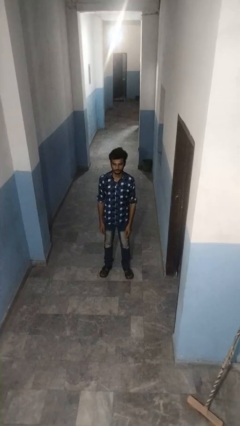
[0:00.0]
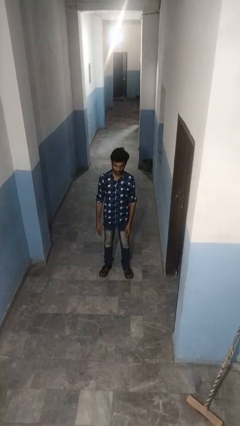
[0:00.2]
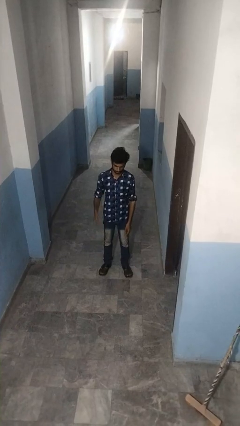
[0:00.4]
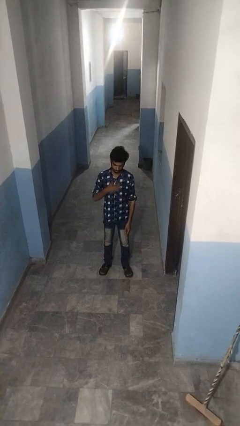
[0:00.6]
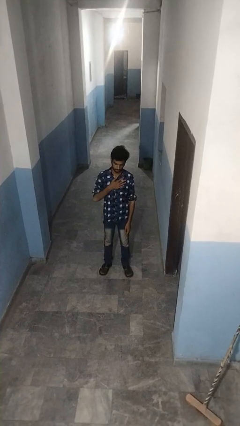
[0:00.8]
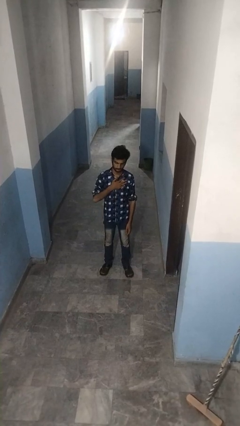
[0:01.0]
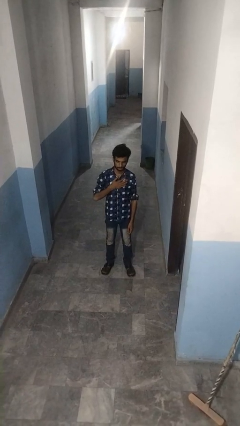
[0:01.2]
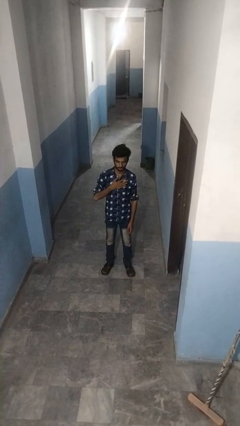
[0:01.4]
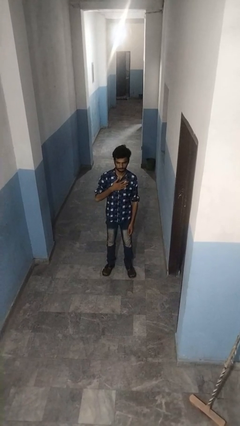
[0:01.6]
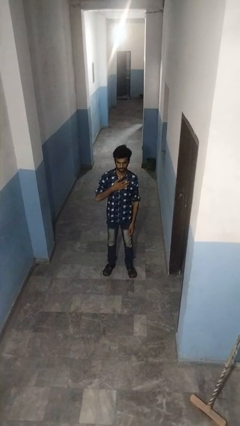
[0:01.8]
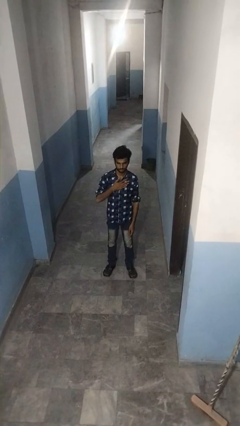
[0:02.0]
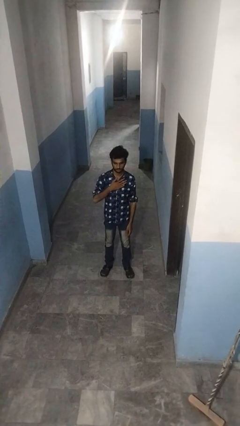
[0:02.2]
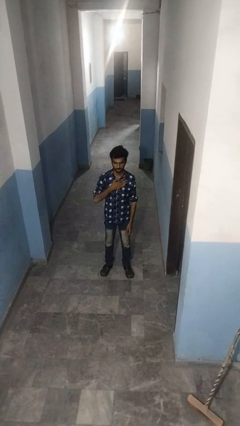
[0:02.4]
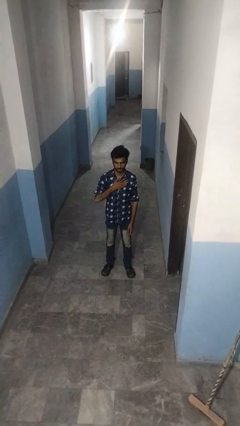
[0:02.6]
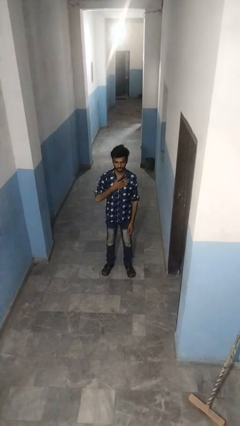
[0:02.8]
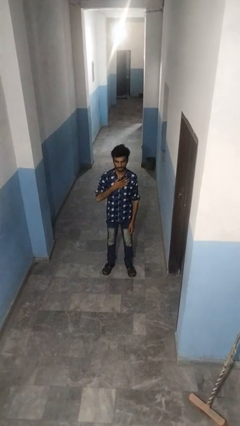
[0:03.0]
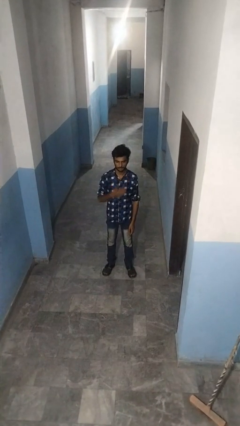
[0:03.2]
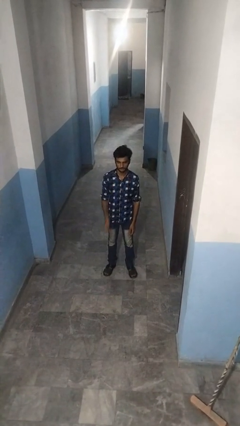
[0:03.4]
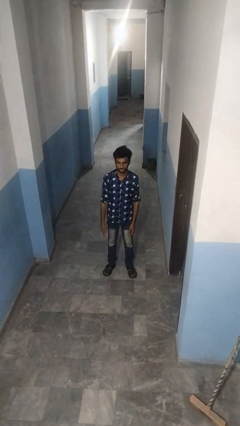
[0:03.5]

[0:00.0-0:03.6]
person drums on chest

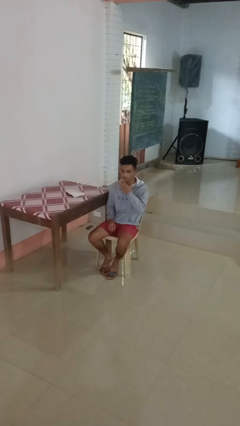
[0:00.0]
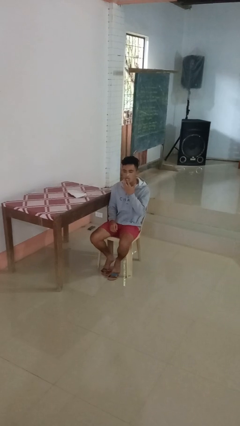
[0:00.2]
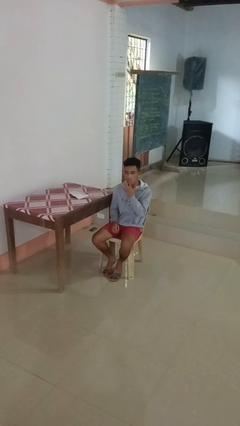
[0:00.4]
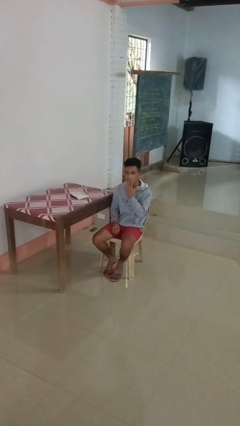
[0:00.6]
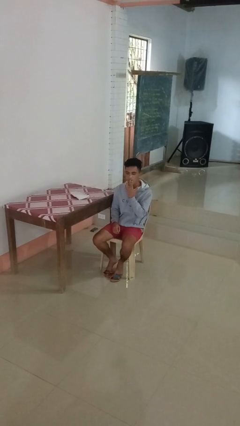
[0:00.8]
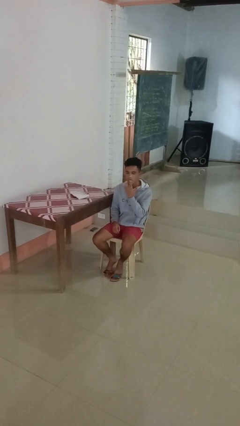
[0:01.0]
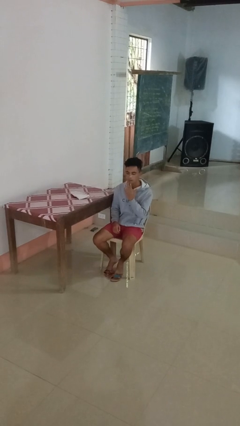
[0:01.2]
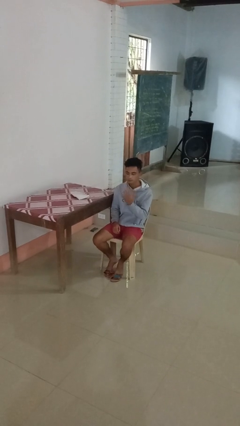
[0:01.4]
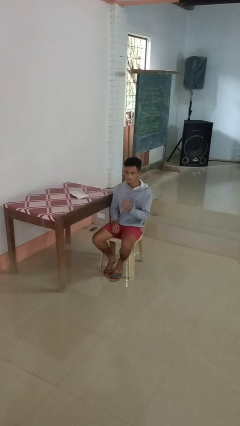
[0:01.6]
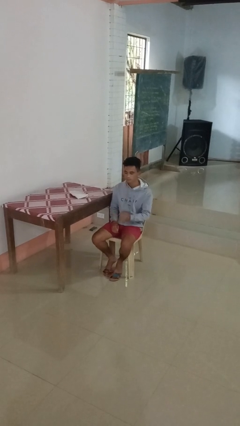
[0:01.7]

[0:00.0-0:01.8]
person licks fingers

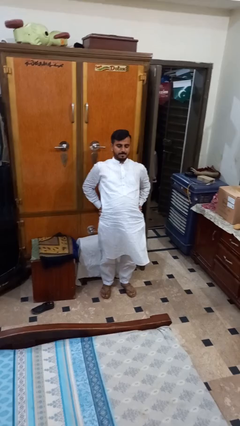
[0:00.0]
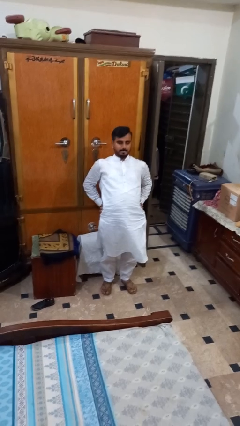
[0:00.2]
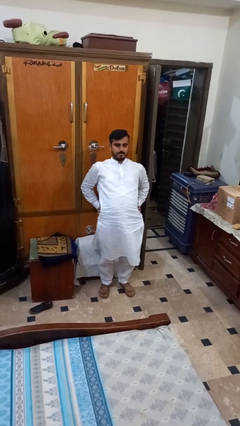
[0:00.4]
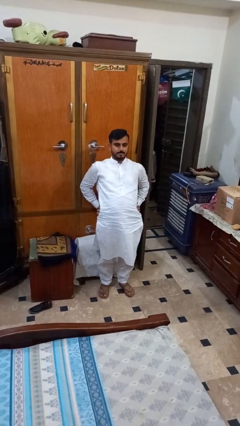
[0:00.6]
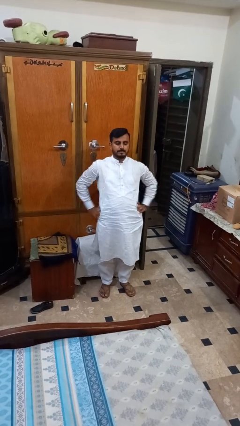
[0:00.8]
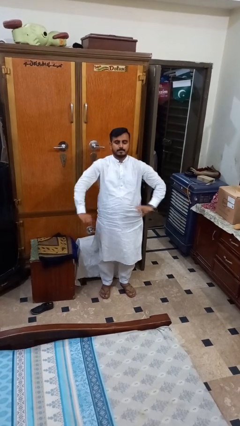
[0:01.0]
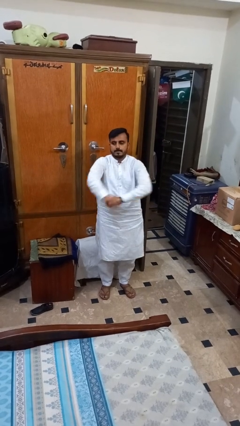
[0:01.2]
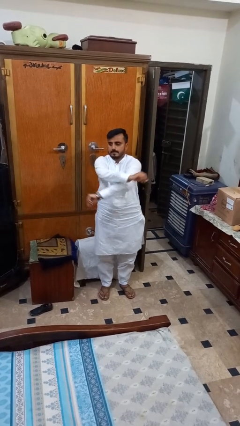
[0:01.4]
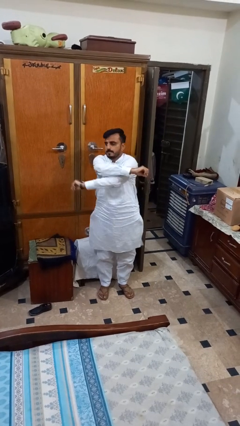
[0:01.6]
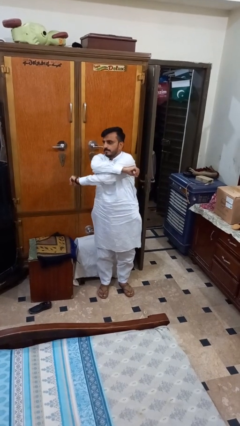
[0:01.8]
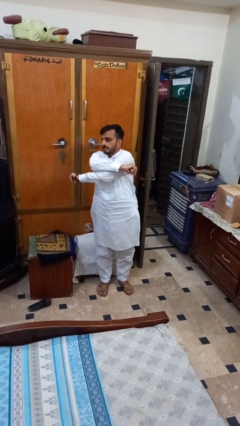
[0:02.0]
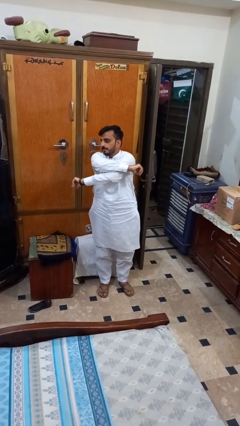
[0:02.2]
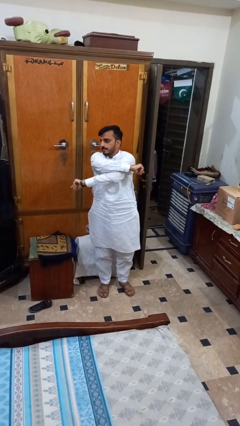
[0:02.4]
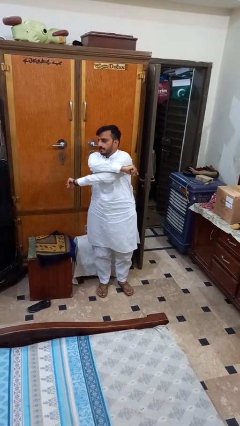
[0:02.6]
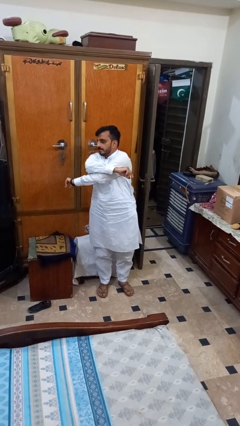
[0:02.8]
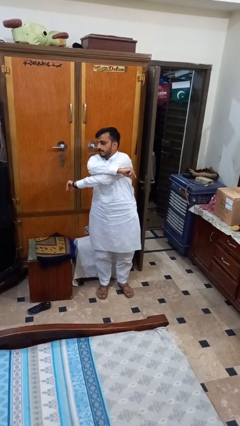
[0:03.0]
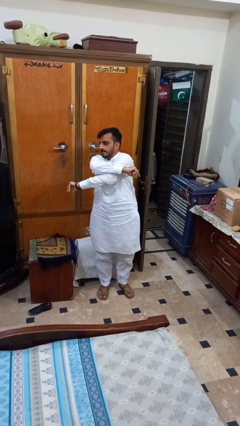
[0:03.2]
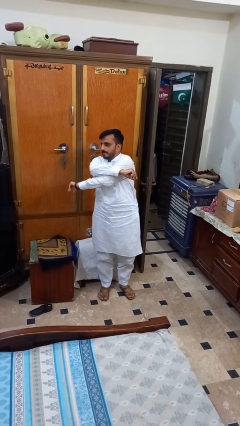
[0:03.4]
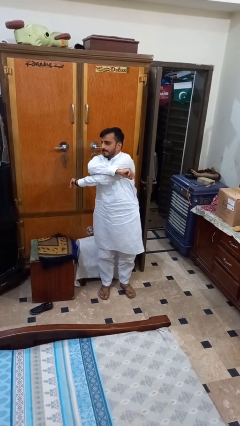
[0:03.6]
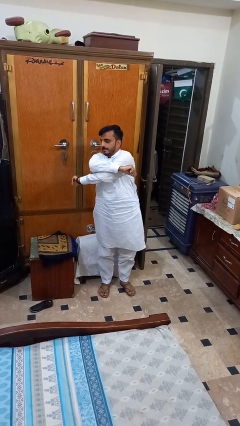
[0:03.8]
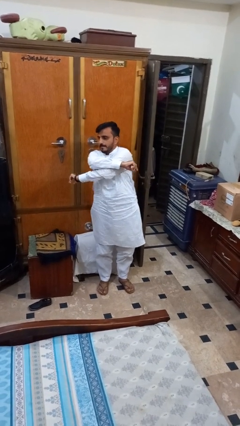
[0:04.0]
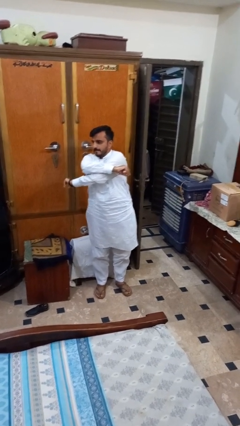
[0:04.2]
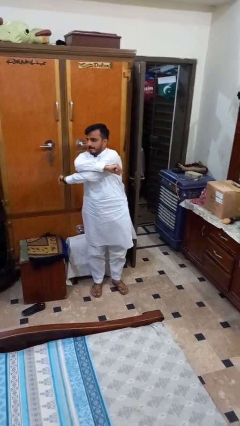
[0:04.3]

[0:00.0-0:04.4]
person stretches arms to side

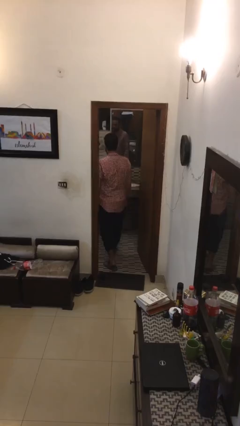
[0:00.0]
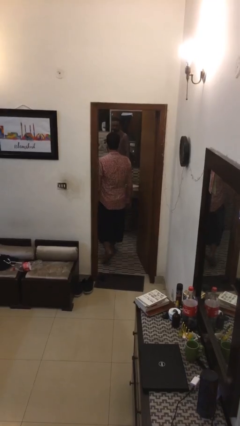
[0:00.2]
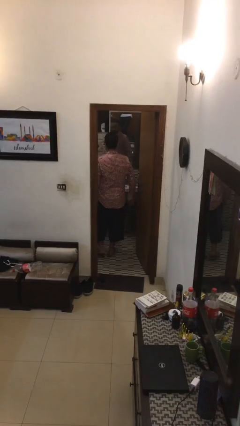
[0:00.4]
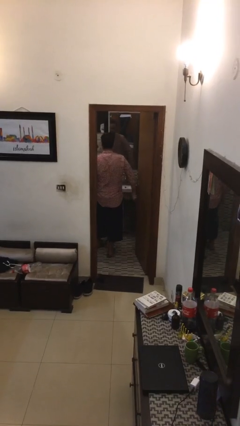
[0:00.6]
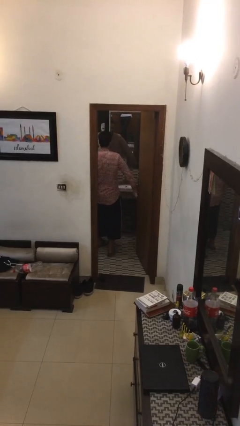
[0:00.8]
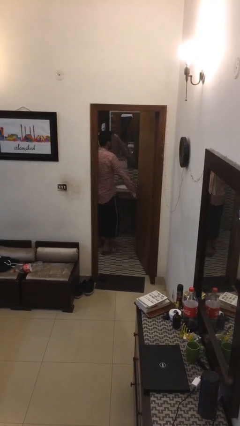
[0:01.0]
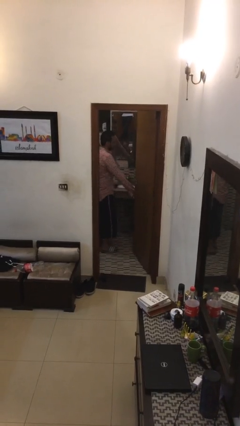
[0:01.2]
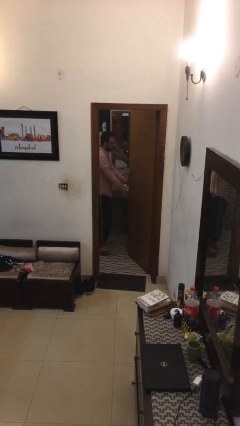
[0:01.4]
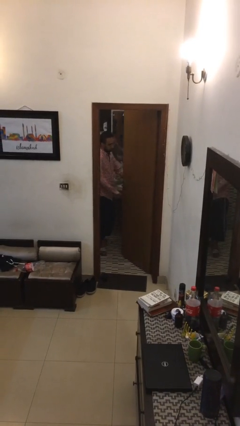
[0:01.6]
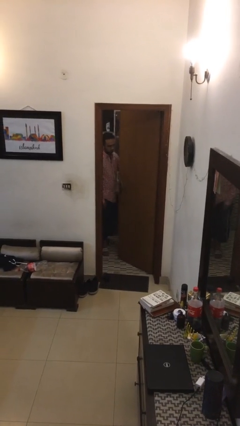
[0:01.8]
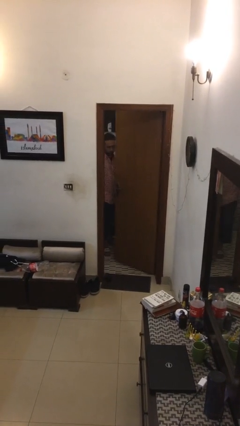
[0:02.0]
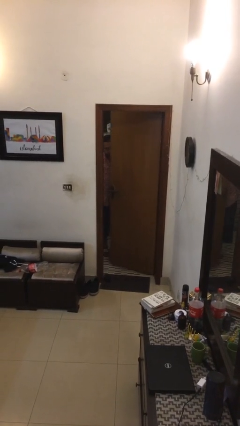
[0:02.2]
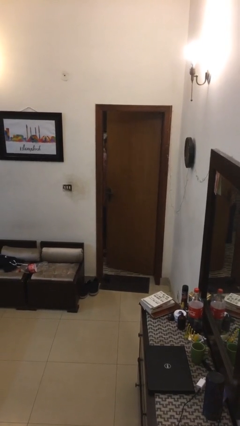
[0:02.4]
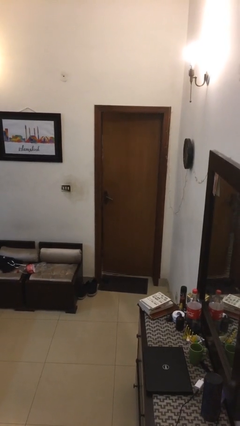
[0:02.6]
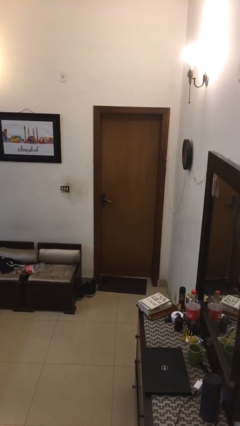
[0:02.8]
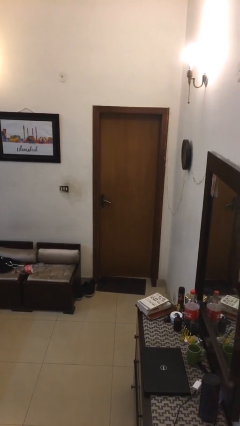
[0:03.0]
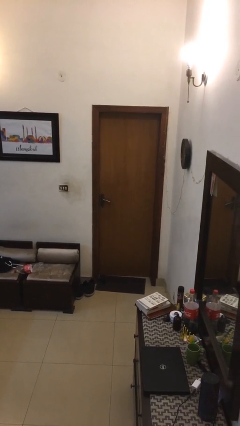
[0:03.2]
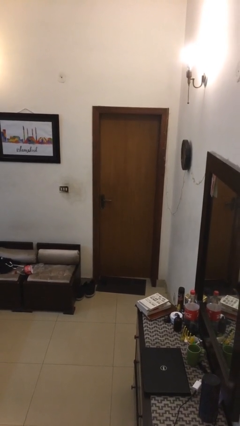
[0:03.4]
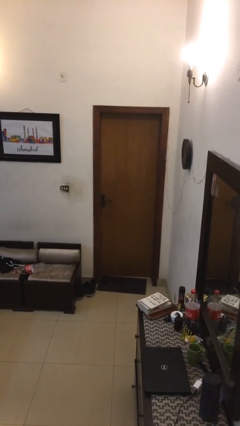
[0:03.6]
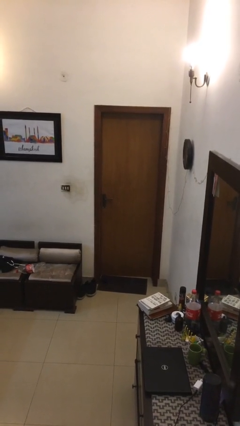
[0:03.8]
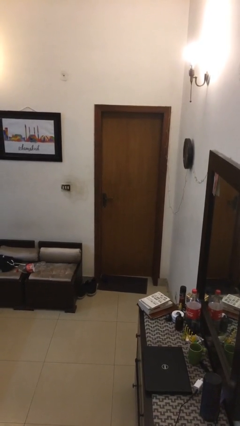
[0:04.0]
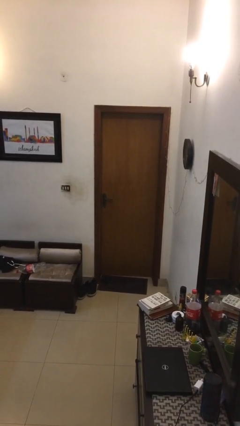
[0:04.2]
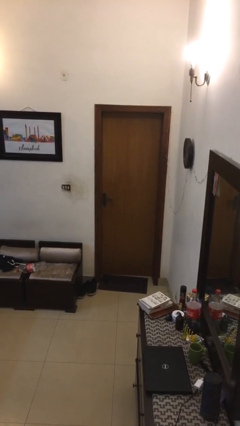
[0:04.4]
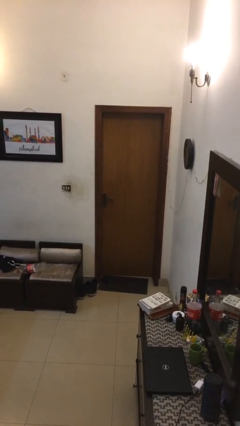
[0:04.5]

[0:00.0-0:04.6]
person closes facility door

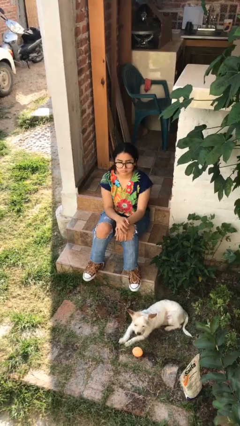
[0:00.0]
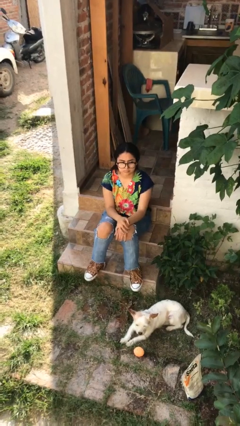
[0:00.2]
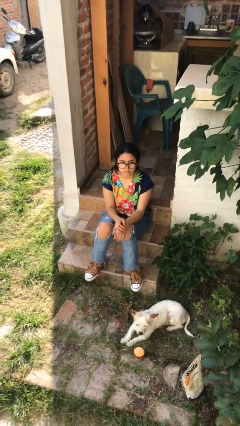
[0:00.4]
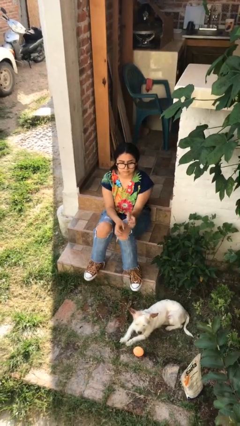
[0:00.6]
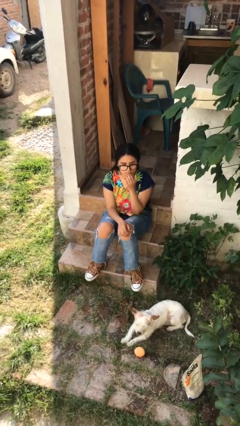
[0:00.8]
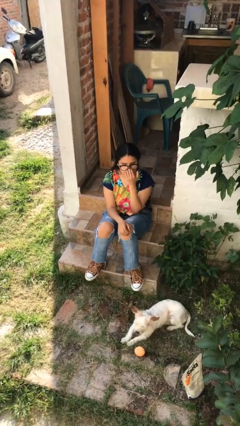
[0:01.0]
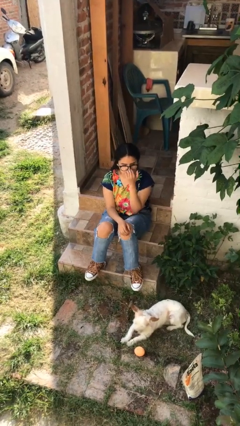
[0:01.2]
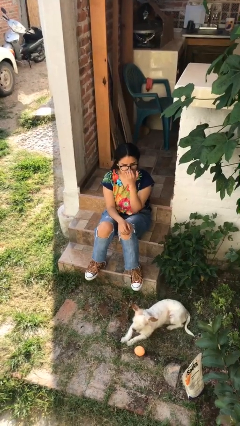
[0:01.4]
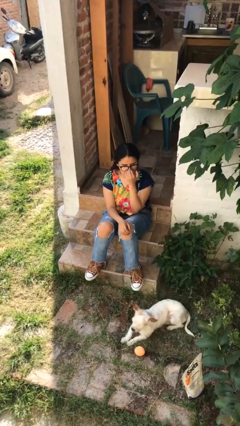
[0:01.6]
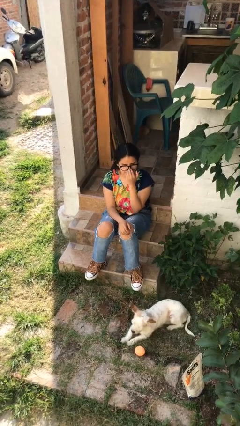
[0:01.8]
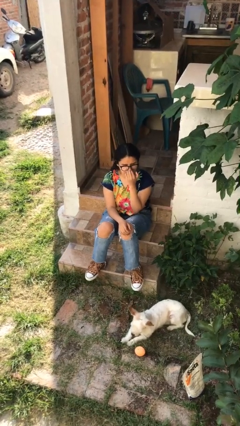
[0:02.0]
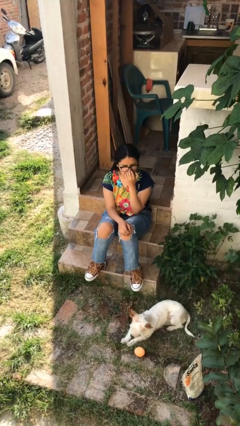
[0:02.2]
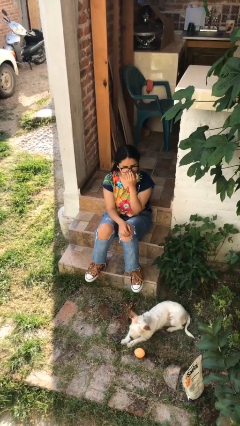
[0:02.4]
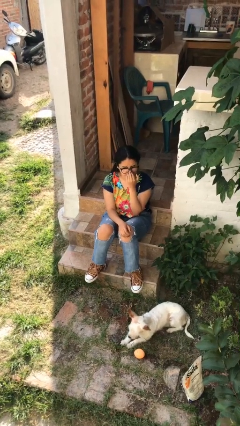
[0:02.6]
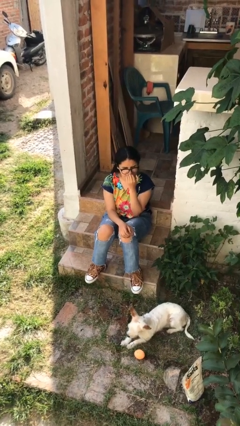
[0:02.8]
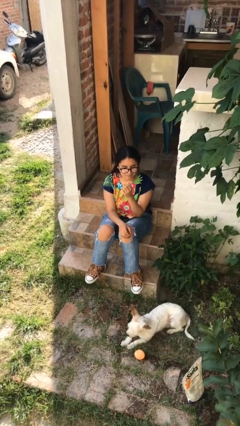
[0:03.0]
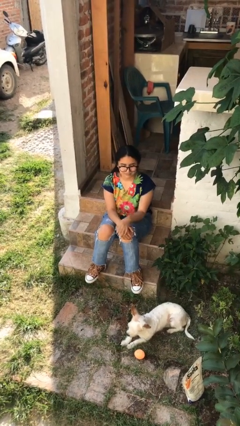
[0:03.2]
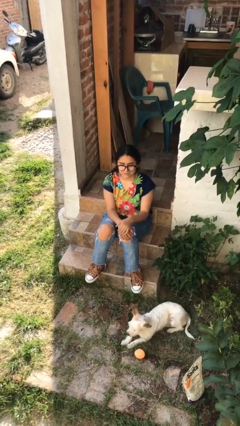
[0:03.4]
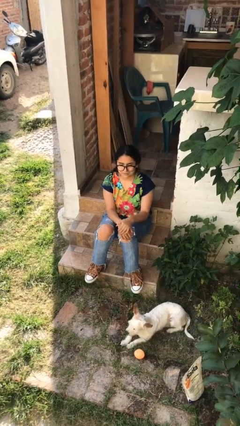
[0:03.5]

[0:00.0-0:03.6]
person scratches face
